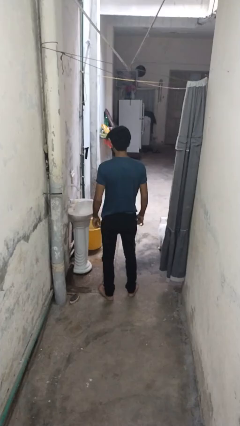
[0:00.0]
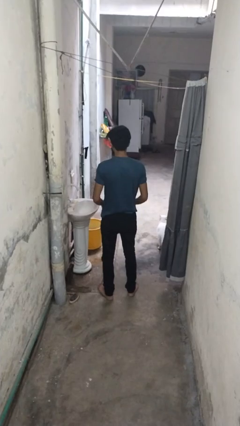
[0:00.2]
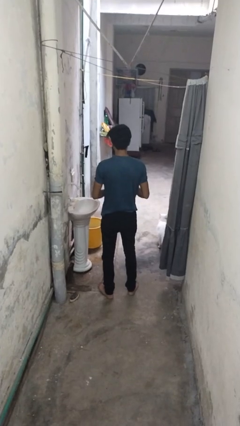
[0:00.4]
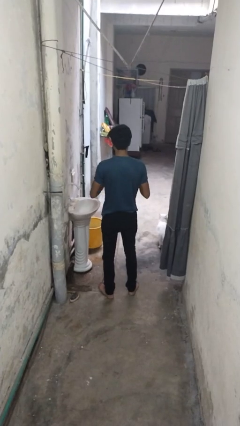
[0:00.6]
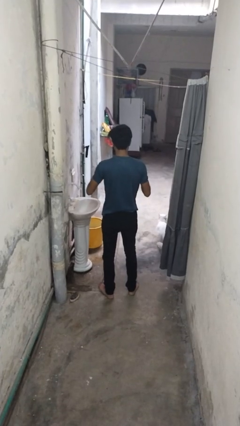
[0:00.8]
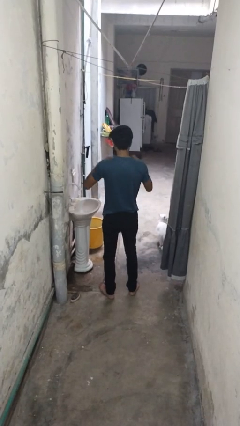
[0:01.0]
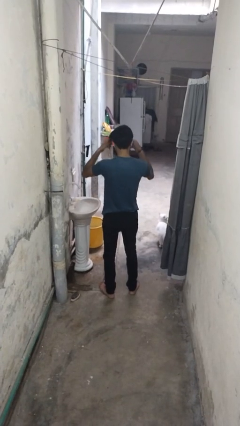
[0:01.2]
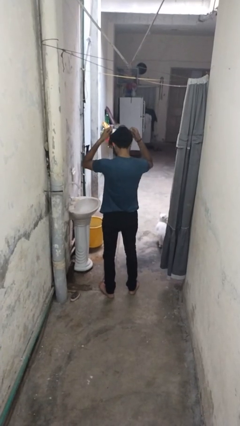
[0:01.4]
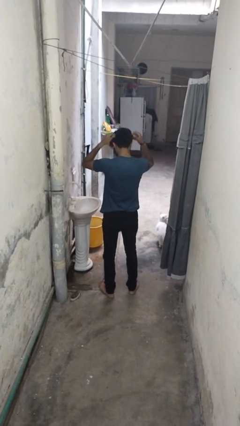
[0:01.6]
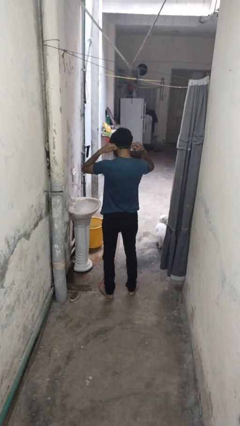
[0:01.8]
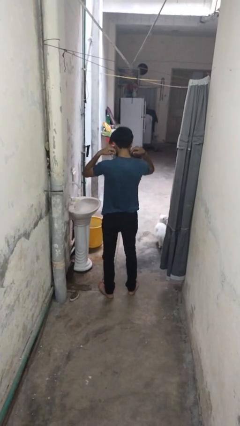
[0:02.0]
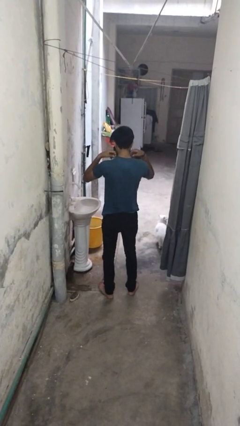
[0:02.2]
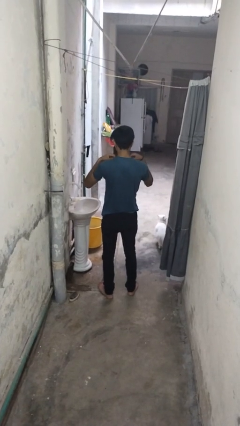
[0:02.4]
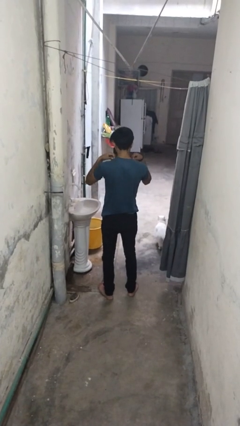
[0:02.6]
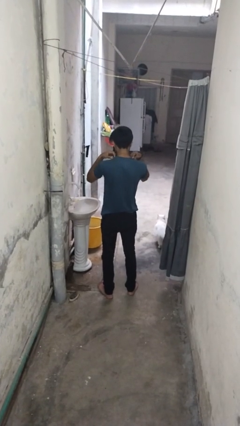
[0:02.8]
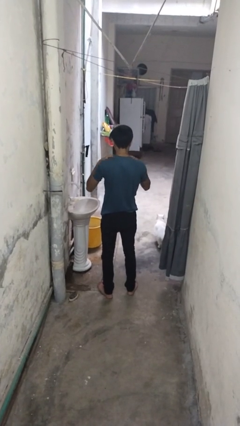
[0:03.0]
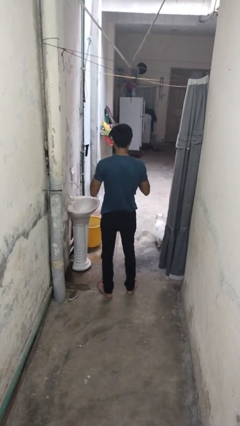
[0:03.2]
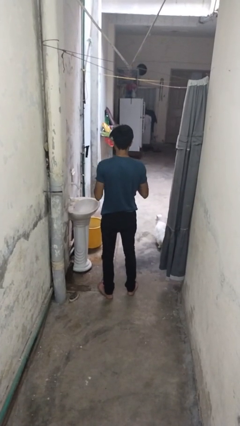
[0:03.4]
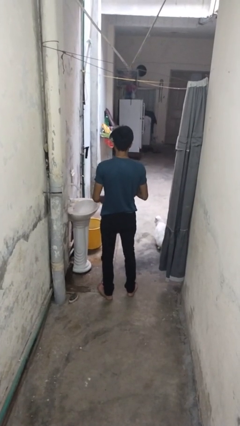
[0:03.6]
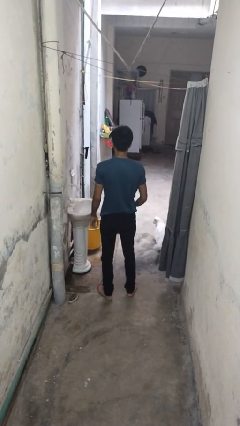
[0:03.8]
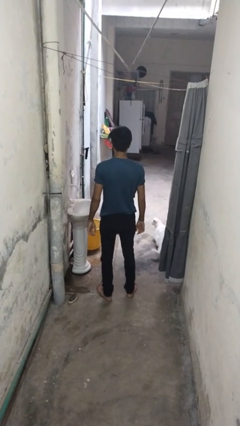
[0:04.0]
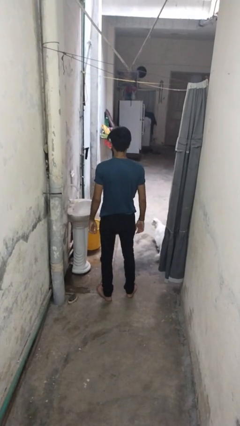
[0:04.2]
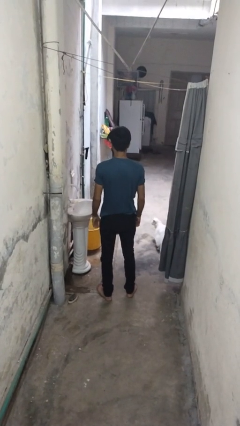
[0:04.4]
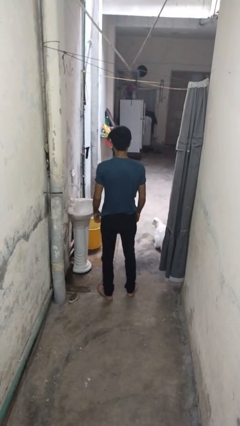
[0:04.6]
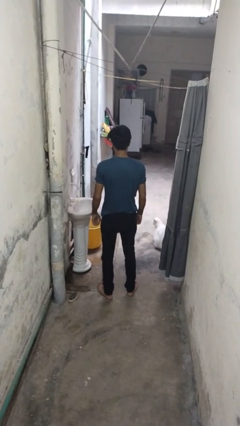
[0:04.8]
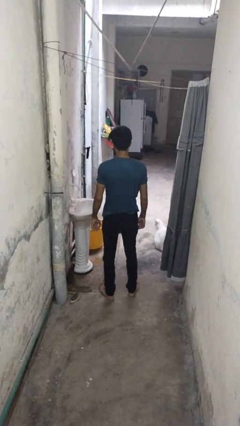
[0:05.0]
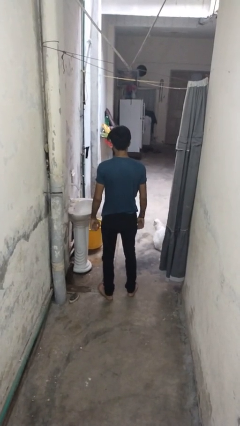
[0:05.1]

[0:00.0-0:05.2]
person puts on necklace

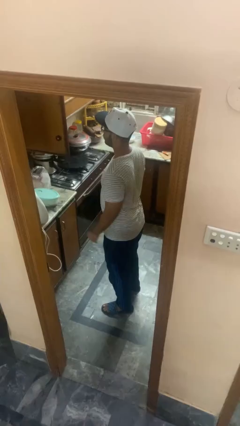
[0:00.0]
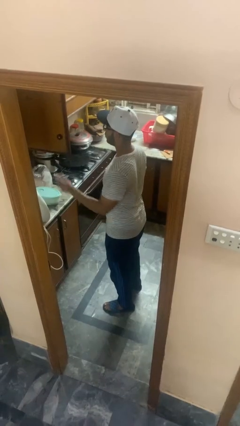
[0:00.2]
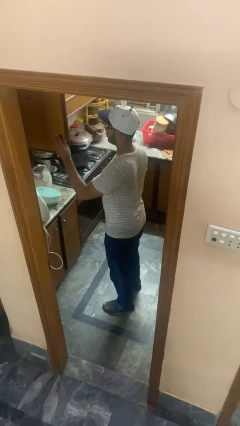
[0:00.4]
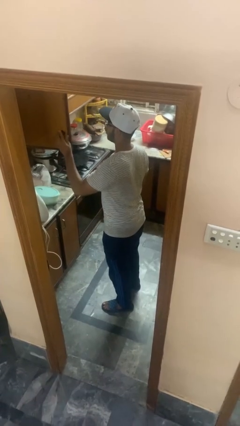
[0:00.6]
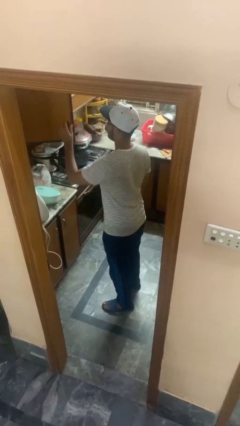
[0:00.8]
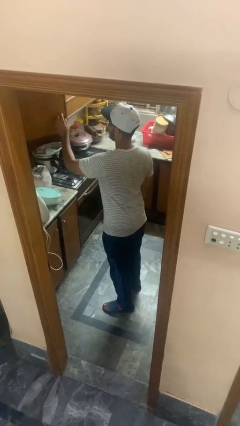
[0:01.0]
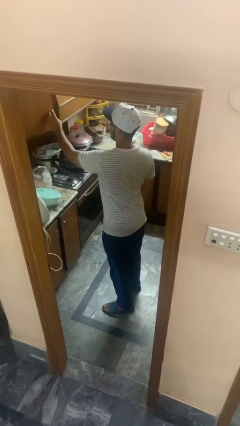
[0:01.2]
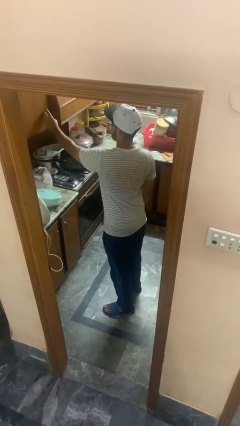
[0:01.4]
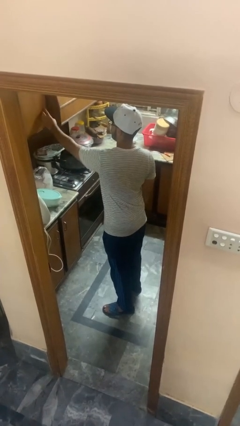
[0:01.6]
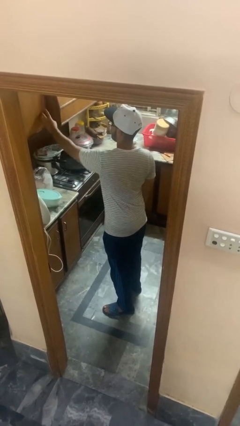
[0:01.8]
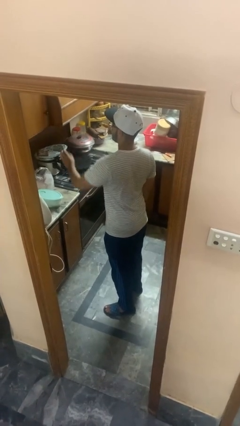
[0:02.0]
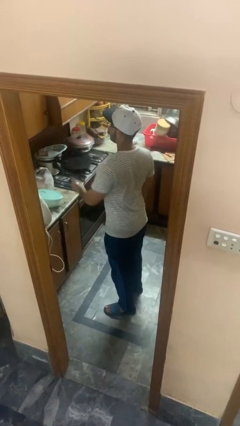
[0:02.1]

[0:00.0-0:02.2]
person closes kitchen drawer

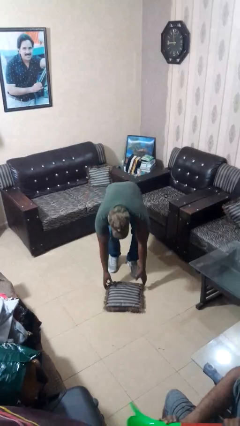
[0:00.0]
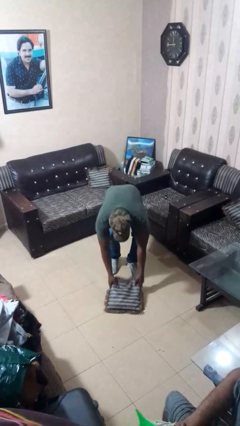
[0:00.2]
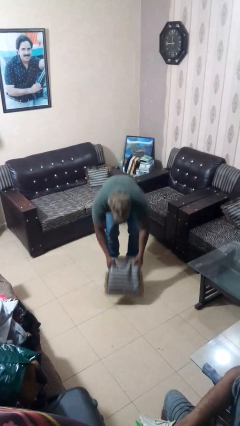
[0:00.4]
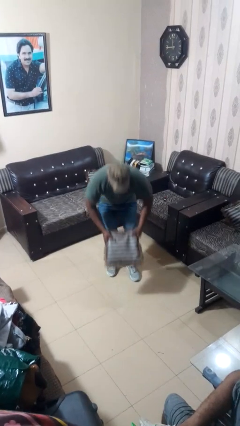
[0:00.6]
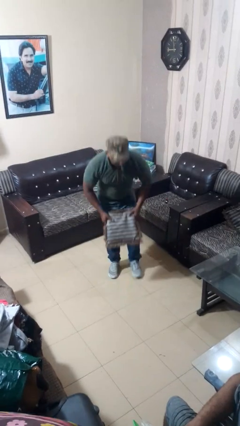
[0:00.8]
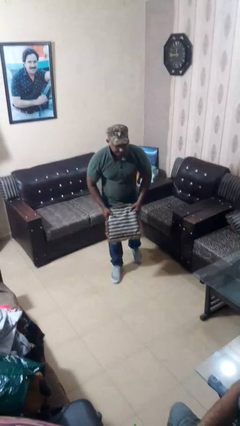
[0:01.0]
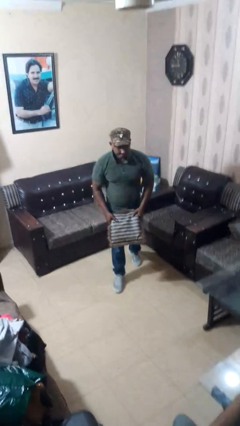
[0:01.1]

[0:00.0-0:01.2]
person picks up object from floor

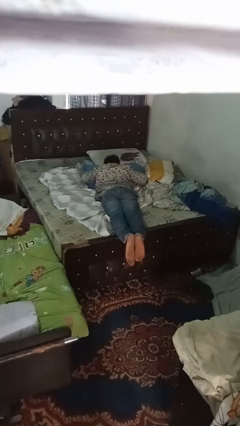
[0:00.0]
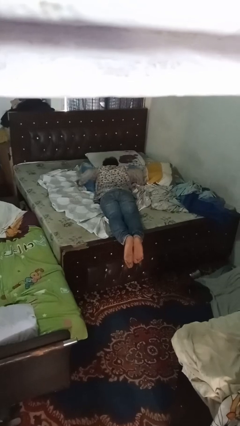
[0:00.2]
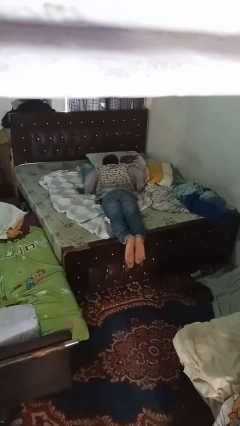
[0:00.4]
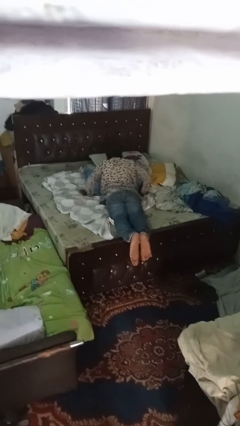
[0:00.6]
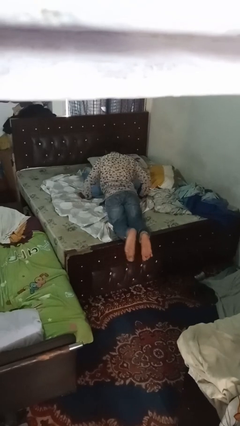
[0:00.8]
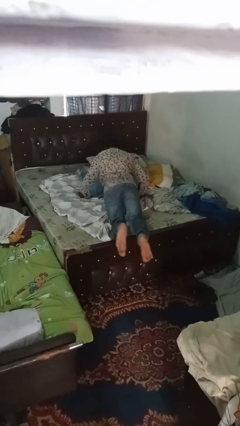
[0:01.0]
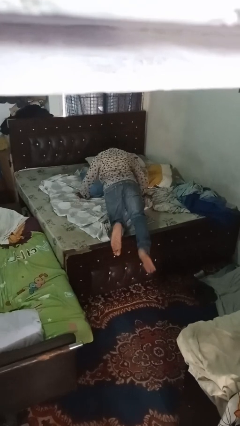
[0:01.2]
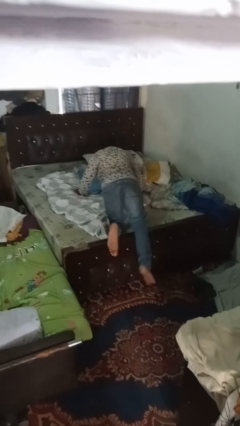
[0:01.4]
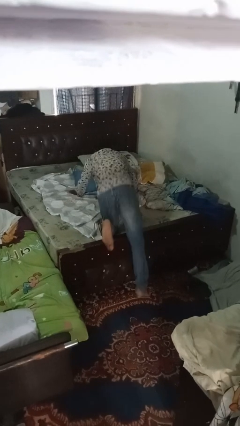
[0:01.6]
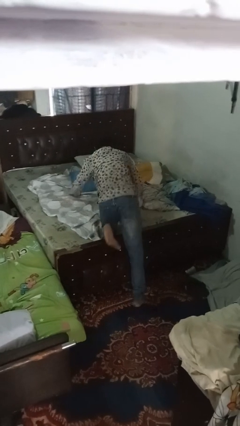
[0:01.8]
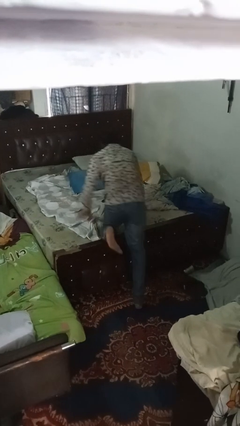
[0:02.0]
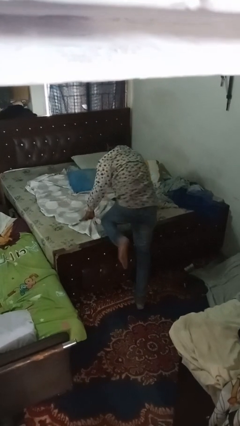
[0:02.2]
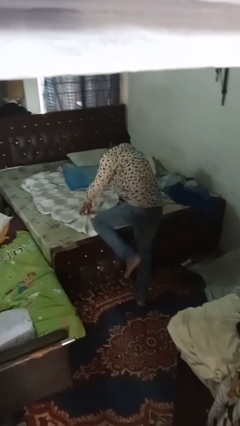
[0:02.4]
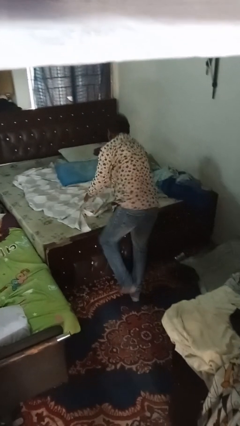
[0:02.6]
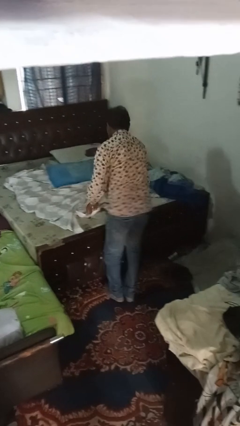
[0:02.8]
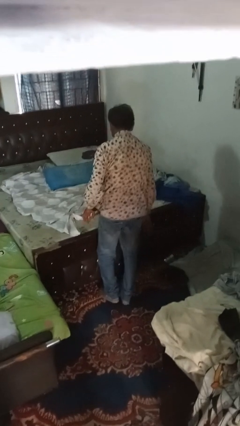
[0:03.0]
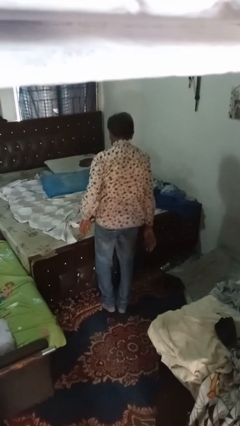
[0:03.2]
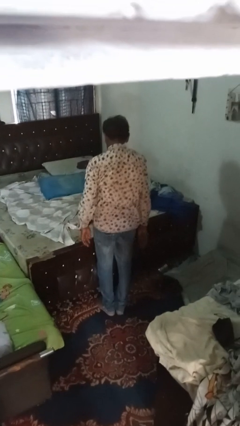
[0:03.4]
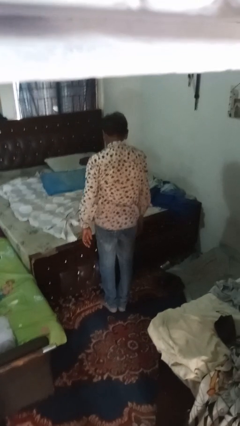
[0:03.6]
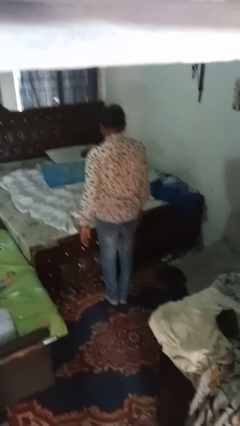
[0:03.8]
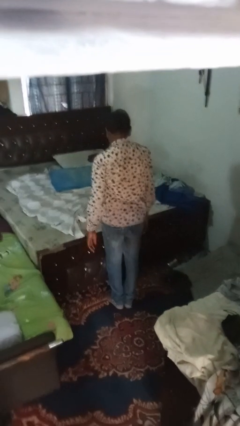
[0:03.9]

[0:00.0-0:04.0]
person stands up

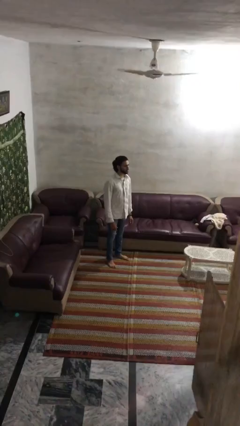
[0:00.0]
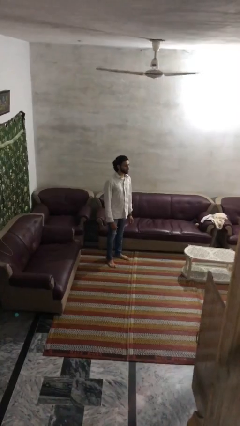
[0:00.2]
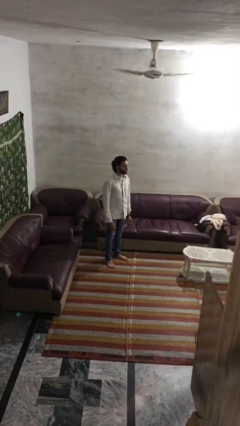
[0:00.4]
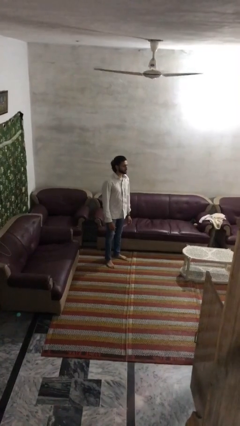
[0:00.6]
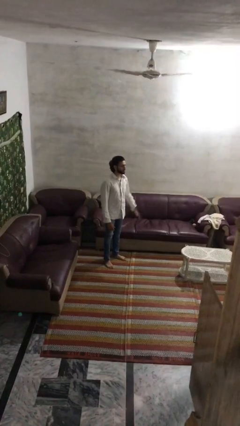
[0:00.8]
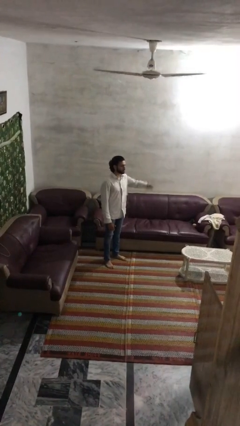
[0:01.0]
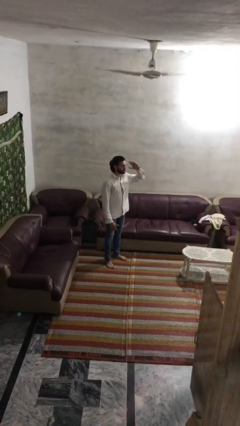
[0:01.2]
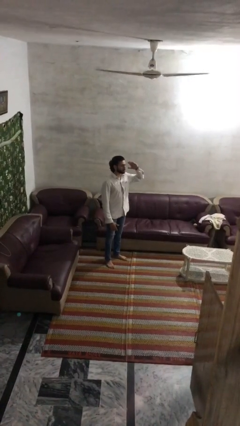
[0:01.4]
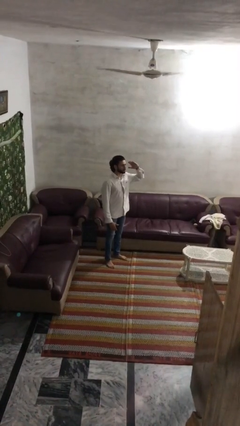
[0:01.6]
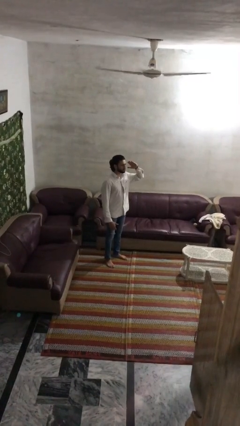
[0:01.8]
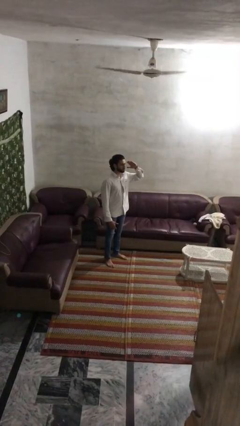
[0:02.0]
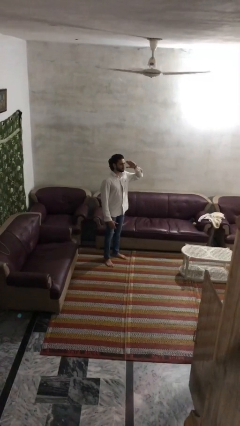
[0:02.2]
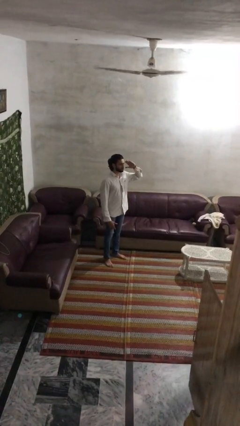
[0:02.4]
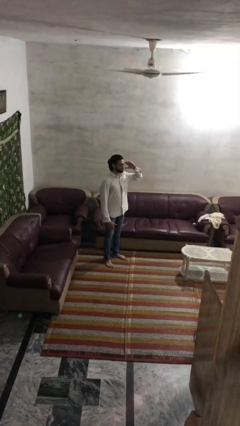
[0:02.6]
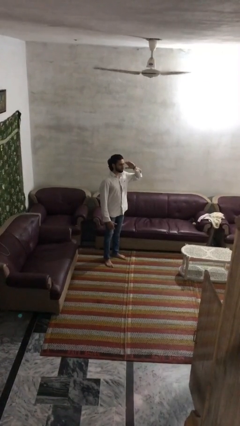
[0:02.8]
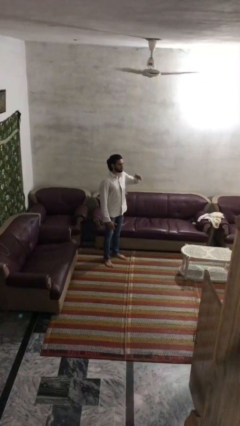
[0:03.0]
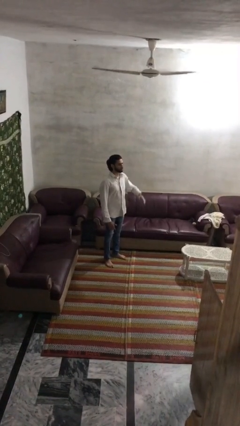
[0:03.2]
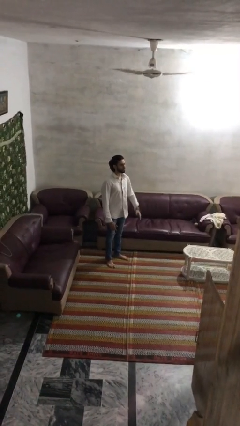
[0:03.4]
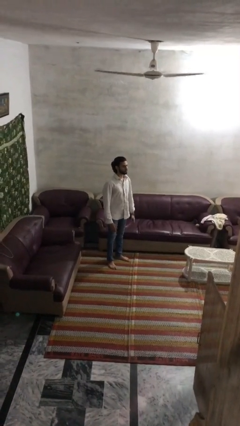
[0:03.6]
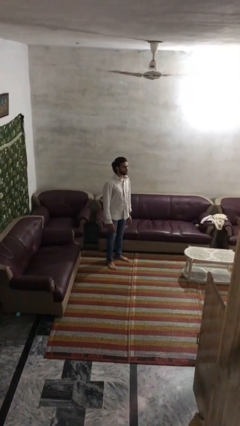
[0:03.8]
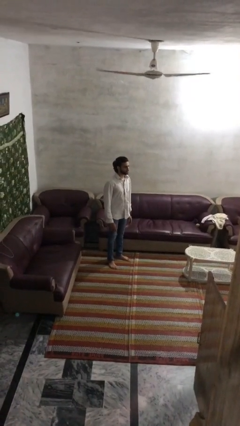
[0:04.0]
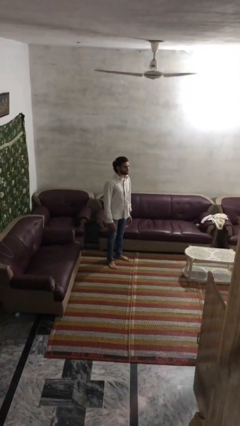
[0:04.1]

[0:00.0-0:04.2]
person salutes

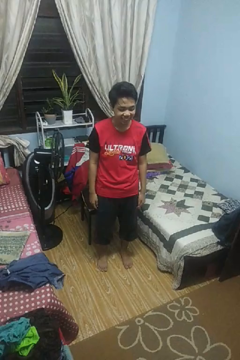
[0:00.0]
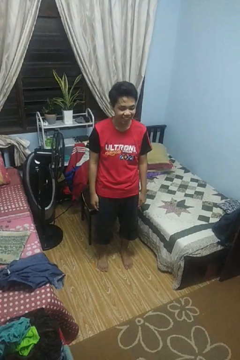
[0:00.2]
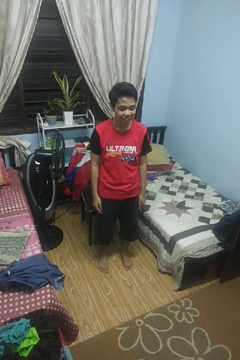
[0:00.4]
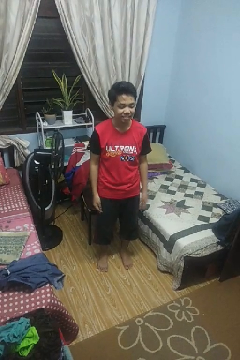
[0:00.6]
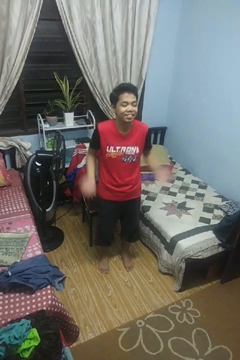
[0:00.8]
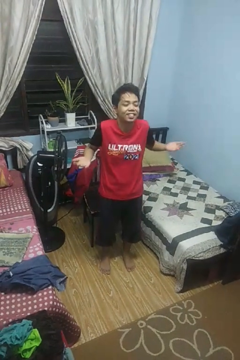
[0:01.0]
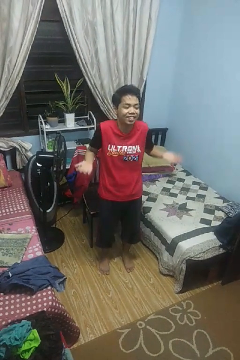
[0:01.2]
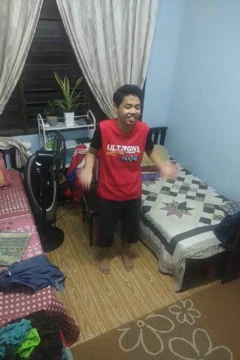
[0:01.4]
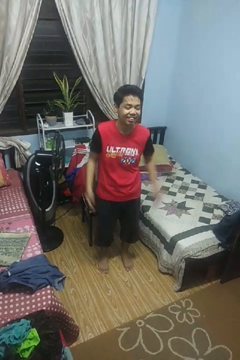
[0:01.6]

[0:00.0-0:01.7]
person shrugs
